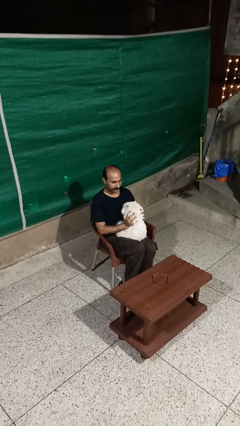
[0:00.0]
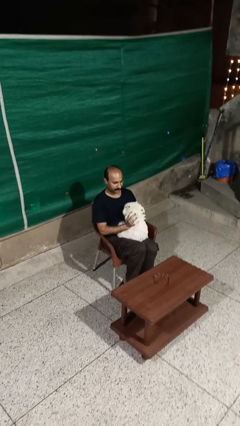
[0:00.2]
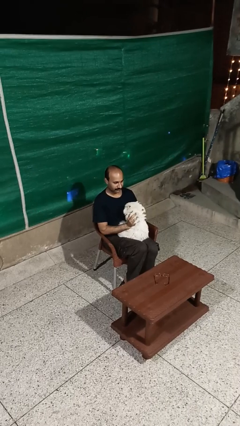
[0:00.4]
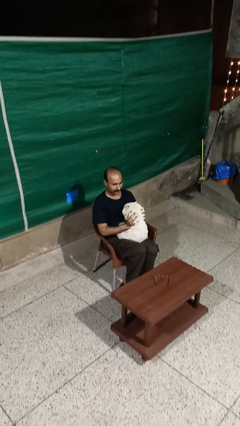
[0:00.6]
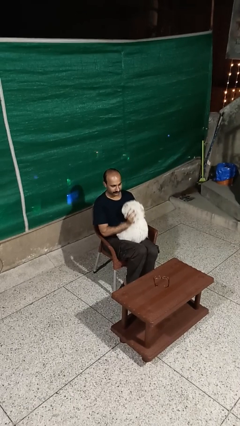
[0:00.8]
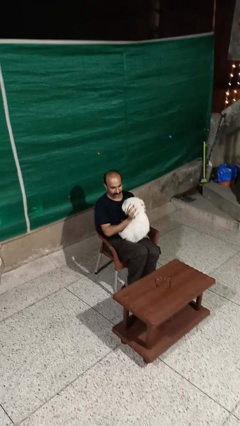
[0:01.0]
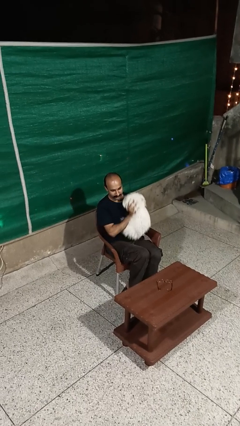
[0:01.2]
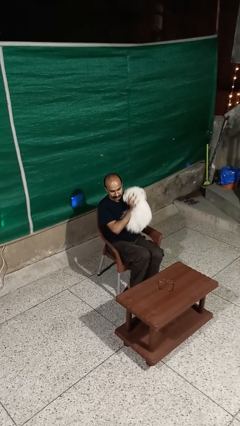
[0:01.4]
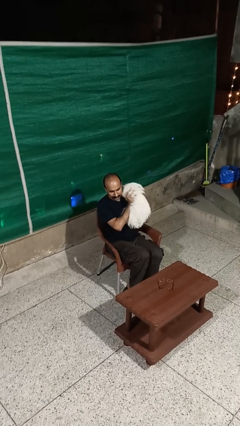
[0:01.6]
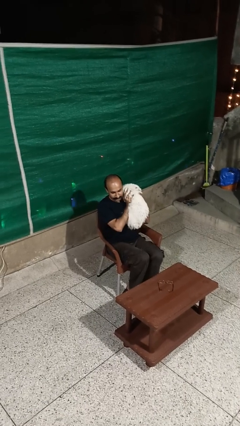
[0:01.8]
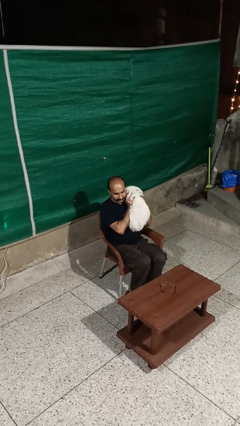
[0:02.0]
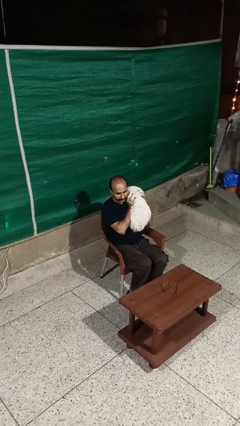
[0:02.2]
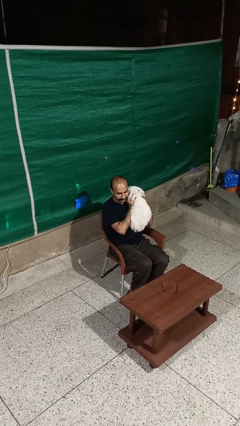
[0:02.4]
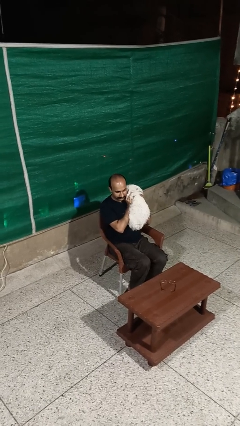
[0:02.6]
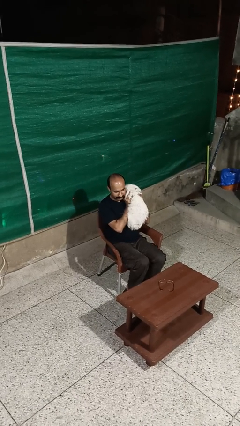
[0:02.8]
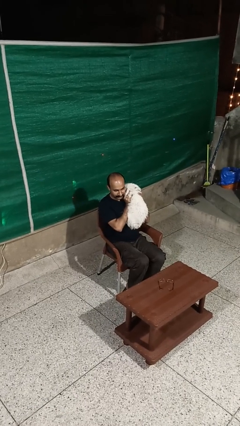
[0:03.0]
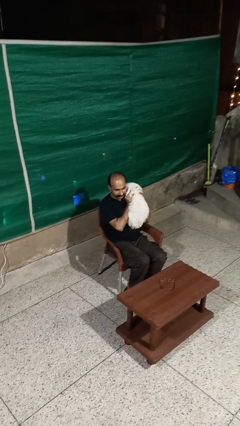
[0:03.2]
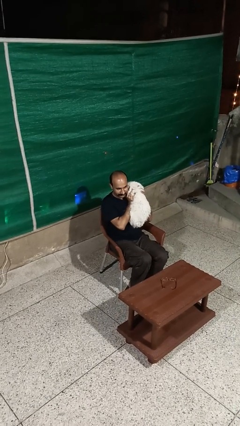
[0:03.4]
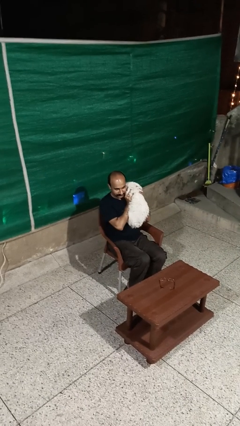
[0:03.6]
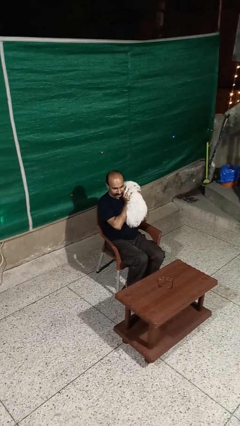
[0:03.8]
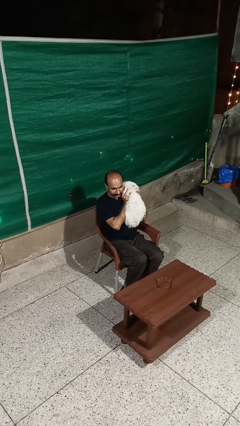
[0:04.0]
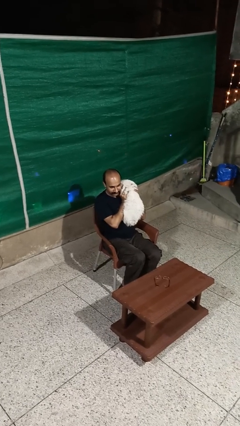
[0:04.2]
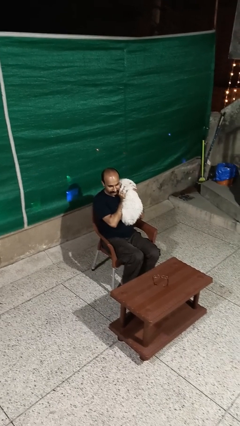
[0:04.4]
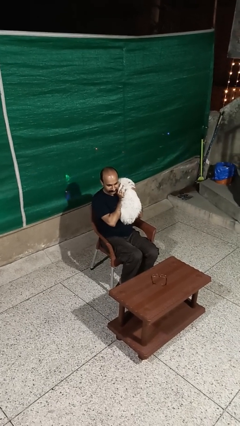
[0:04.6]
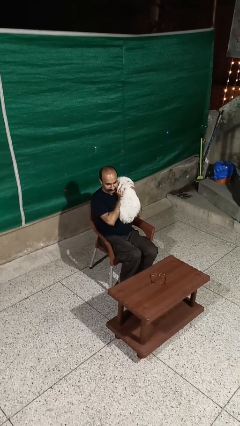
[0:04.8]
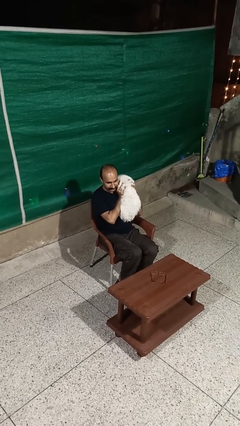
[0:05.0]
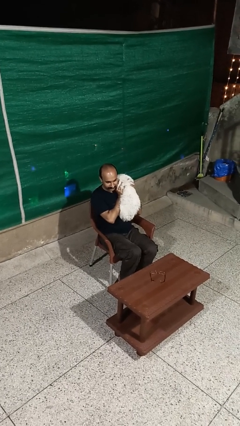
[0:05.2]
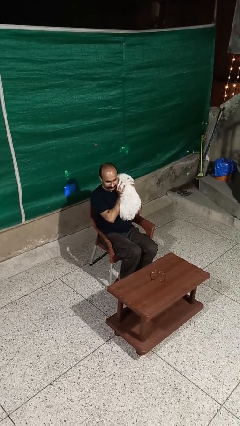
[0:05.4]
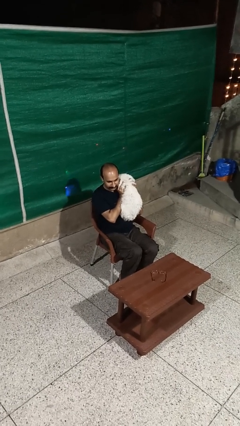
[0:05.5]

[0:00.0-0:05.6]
person hugs dog

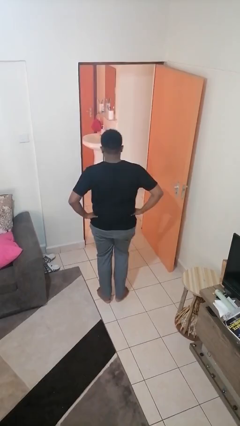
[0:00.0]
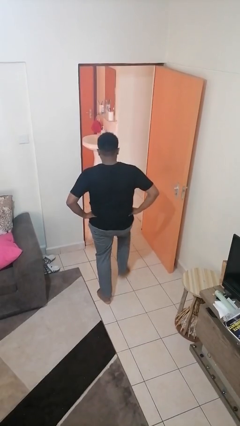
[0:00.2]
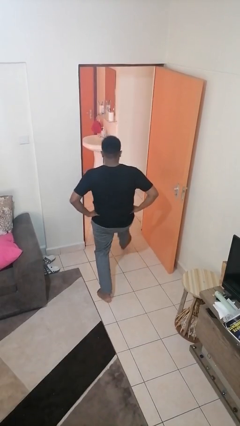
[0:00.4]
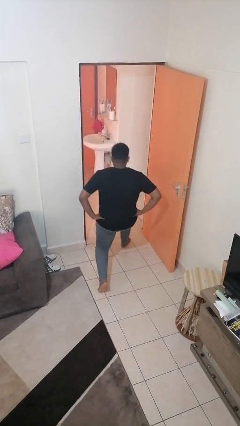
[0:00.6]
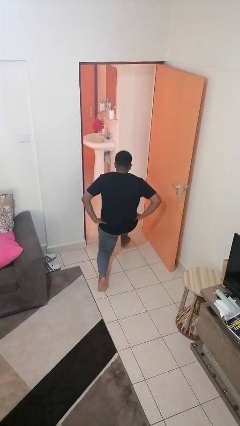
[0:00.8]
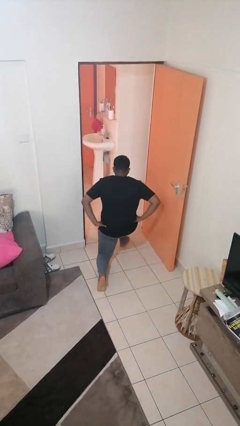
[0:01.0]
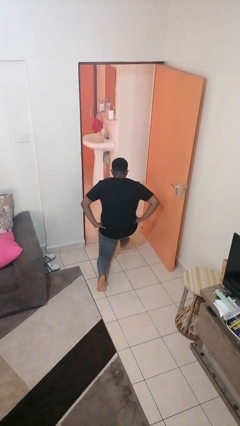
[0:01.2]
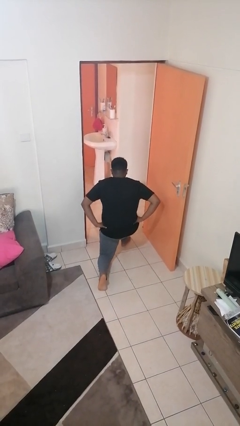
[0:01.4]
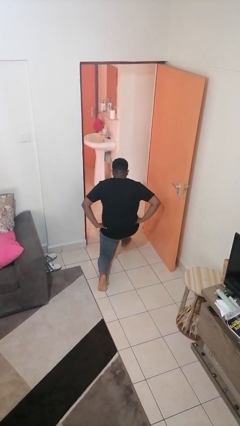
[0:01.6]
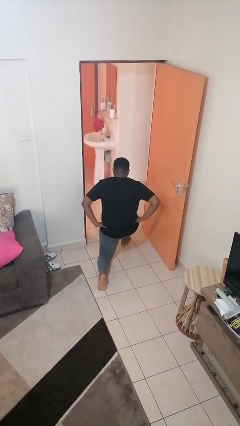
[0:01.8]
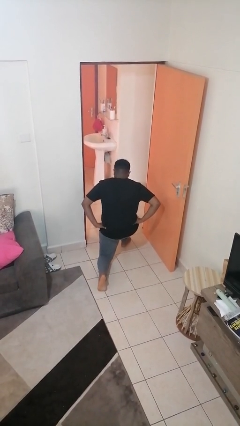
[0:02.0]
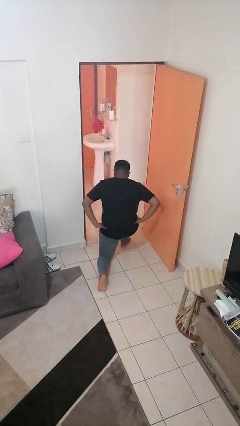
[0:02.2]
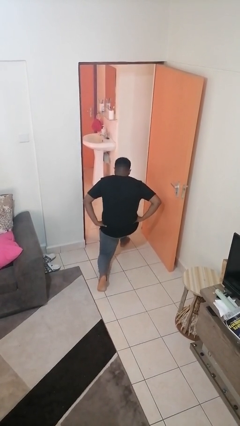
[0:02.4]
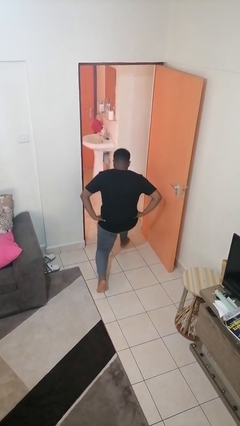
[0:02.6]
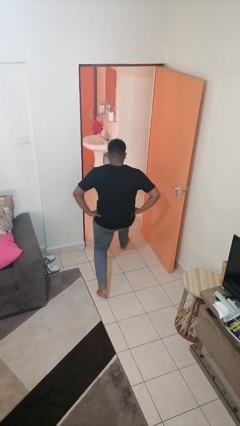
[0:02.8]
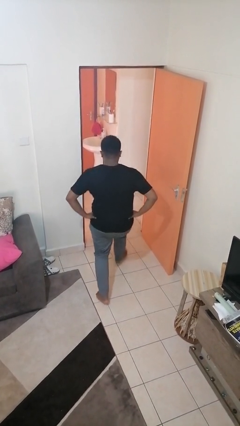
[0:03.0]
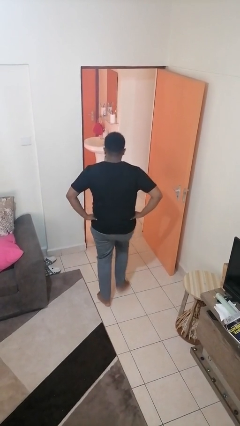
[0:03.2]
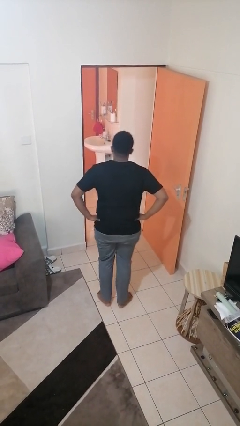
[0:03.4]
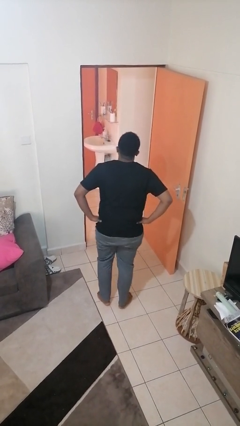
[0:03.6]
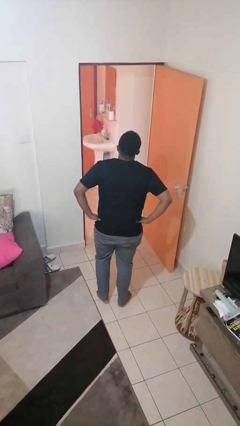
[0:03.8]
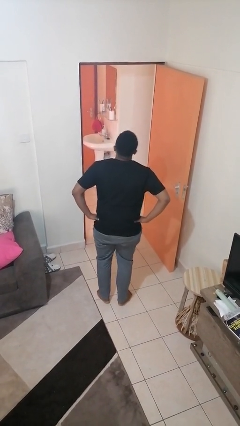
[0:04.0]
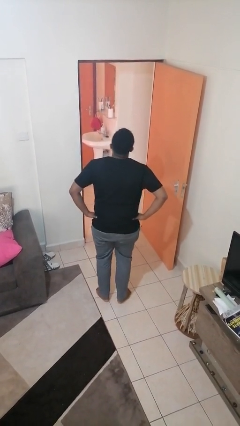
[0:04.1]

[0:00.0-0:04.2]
person exercises with lunges

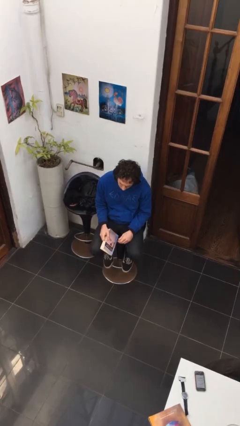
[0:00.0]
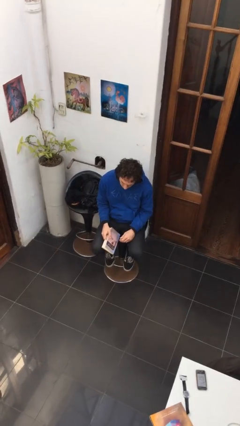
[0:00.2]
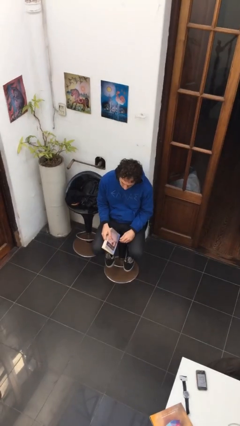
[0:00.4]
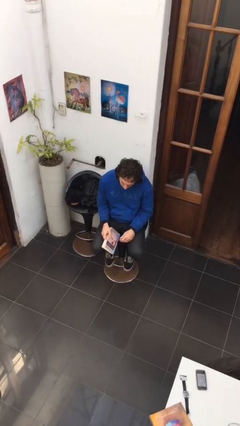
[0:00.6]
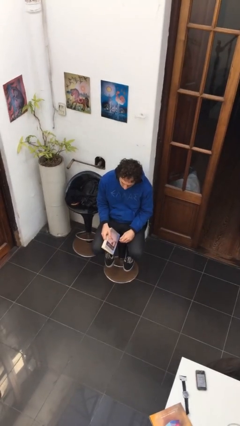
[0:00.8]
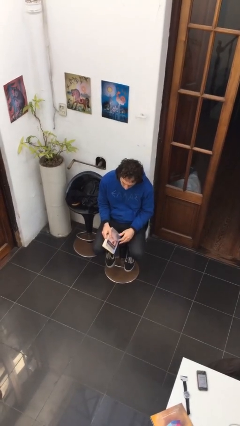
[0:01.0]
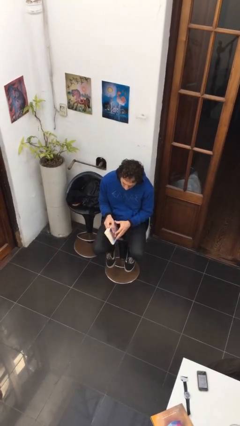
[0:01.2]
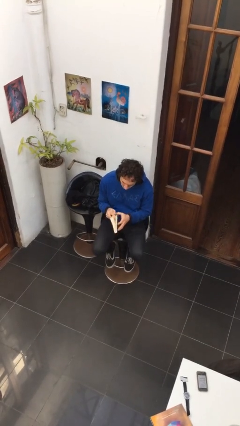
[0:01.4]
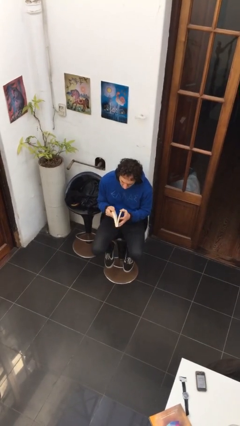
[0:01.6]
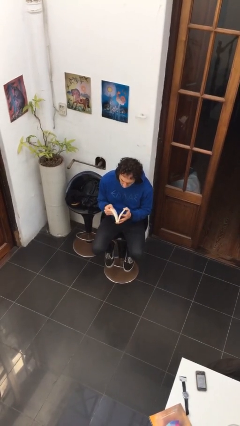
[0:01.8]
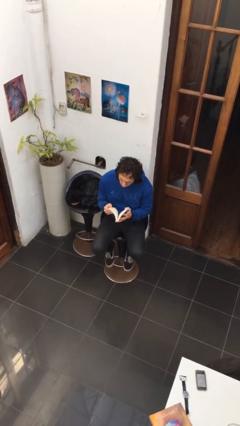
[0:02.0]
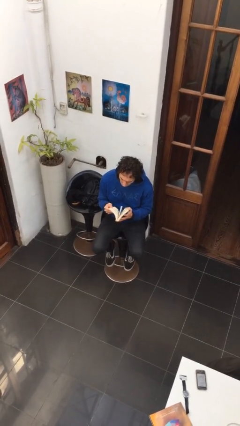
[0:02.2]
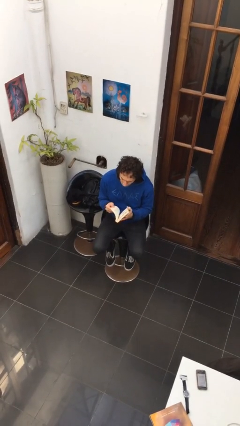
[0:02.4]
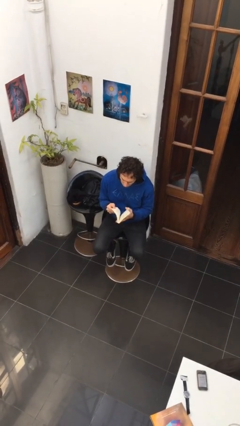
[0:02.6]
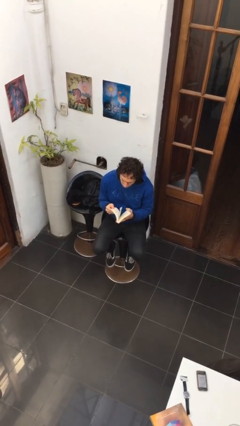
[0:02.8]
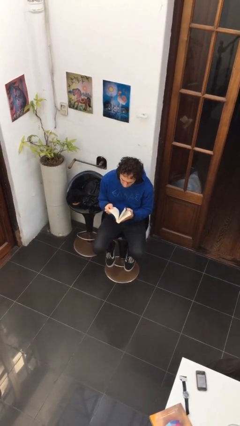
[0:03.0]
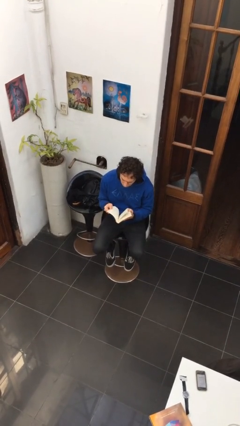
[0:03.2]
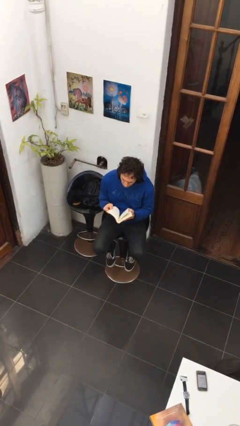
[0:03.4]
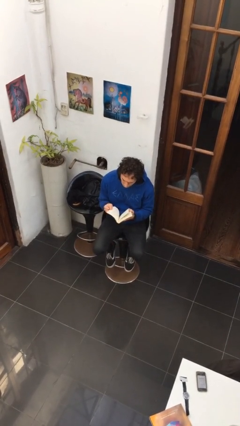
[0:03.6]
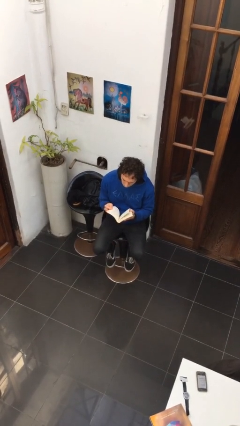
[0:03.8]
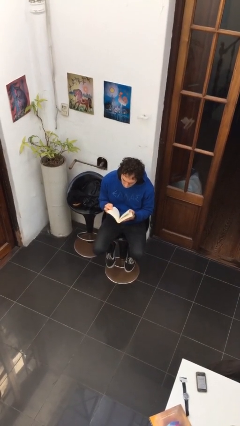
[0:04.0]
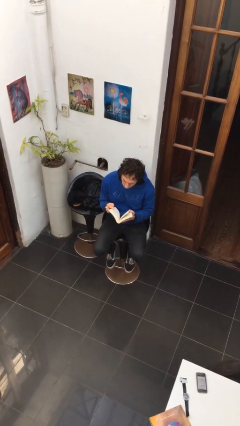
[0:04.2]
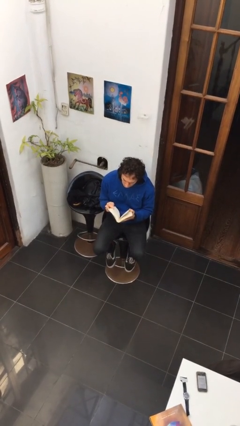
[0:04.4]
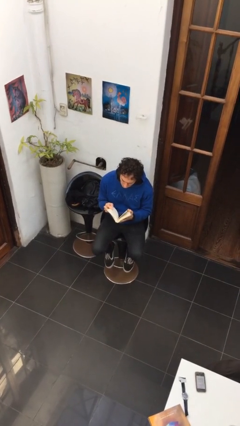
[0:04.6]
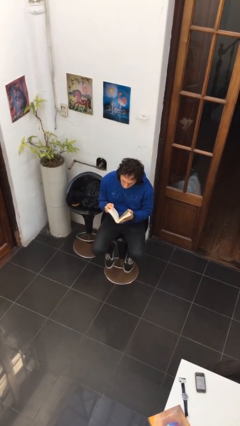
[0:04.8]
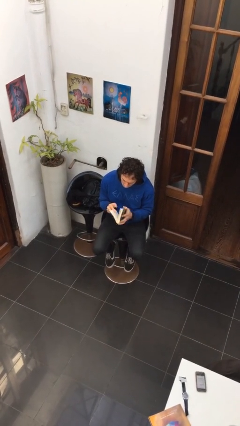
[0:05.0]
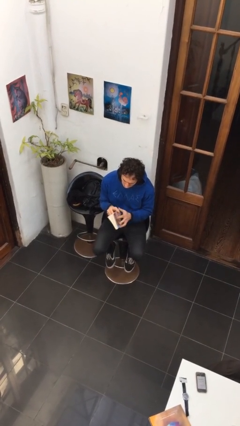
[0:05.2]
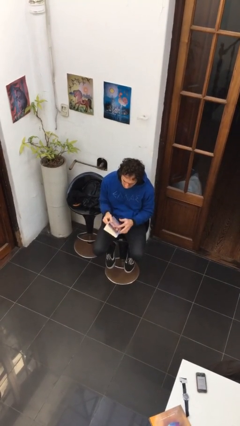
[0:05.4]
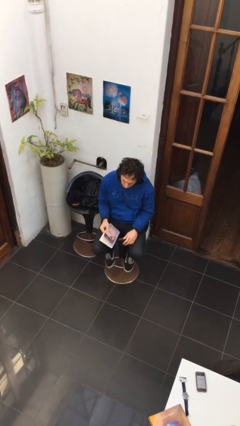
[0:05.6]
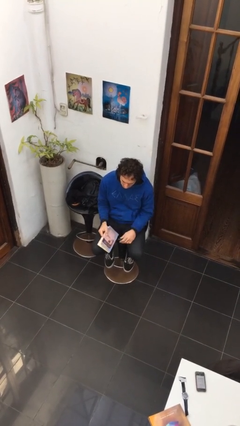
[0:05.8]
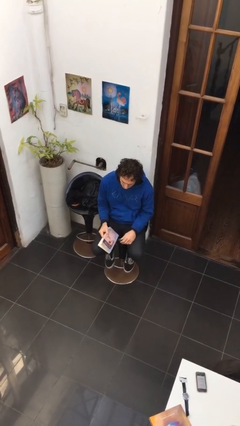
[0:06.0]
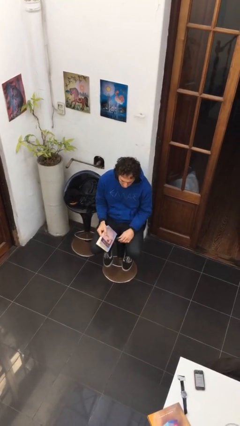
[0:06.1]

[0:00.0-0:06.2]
person reads book

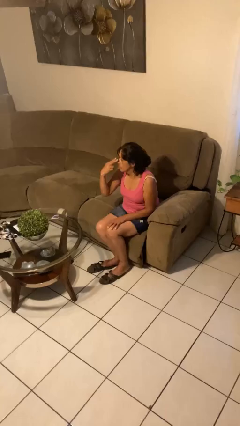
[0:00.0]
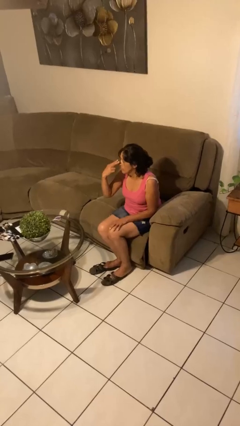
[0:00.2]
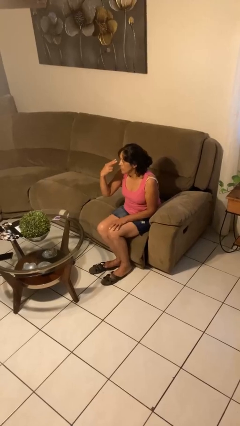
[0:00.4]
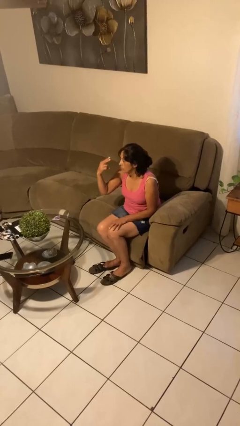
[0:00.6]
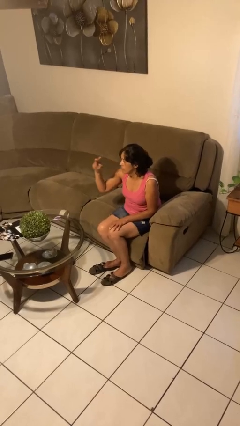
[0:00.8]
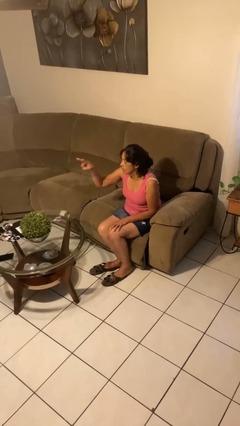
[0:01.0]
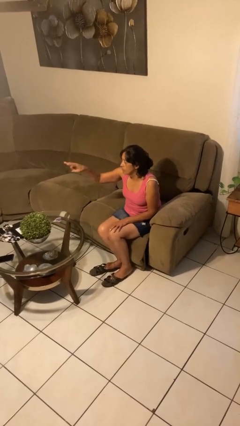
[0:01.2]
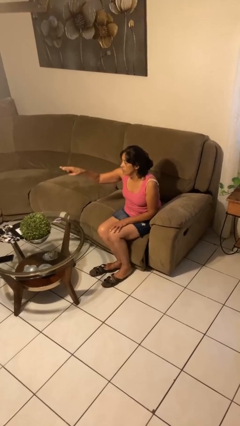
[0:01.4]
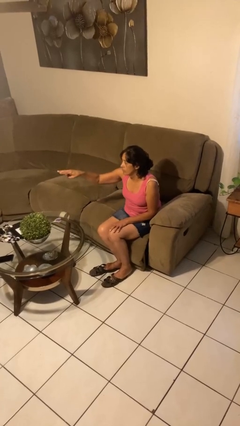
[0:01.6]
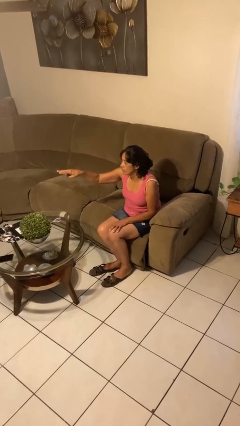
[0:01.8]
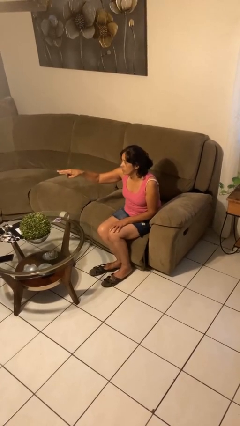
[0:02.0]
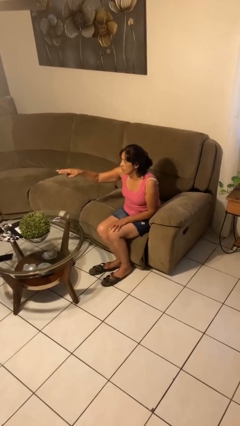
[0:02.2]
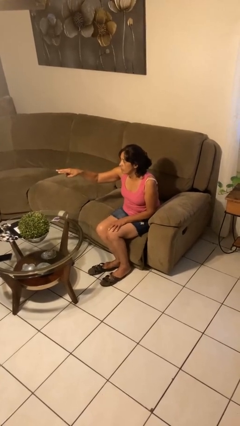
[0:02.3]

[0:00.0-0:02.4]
person gestures watch closely
